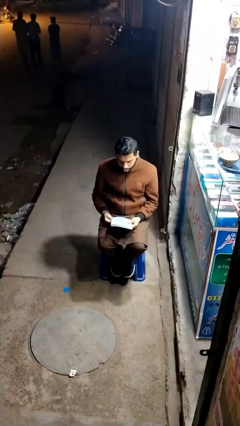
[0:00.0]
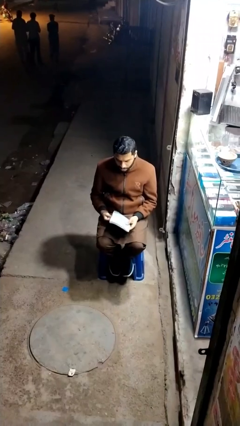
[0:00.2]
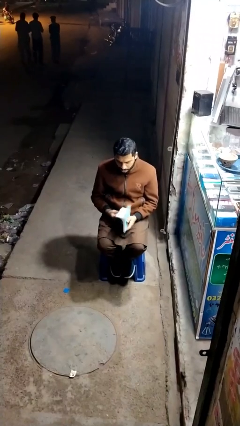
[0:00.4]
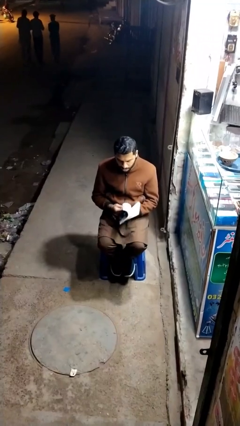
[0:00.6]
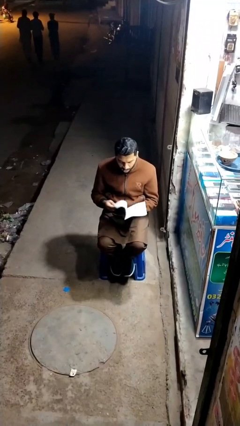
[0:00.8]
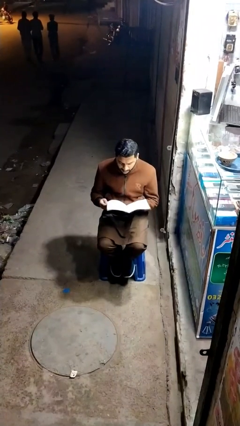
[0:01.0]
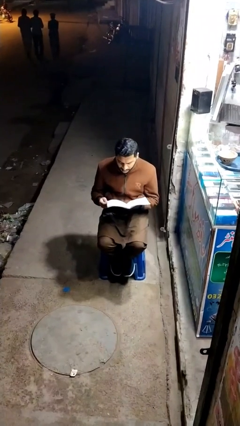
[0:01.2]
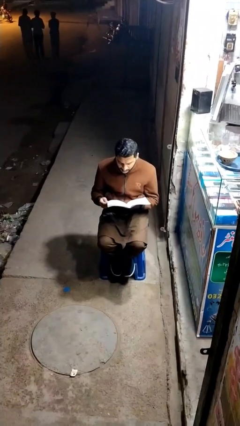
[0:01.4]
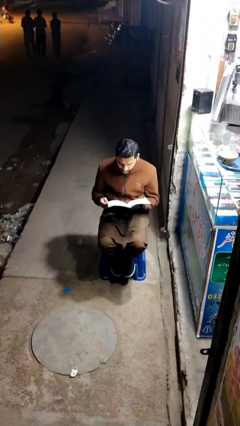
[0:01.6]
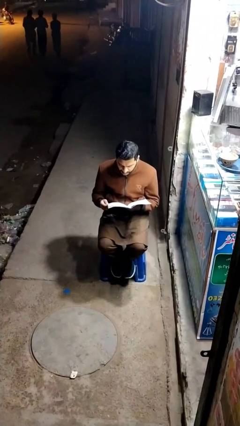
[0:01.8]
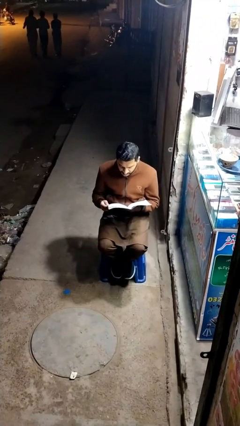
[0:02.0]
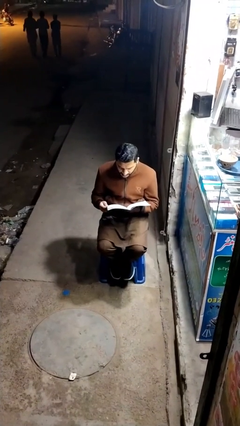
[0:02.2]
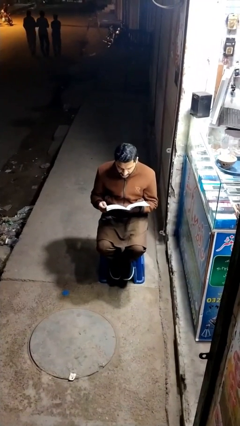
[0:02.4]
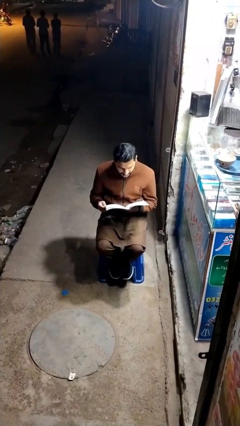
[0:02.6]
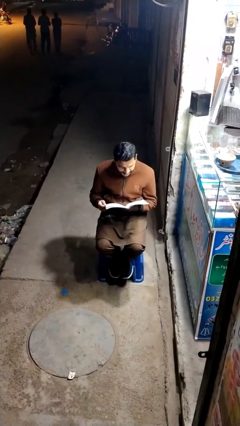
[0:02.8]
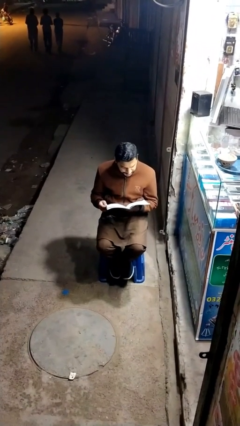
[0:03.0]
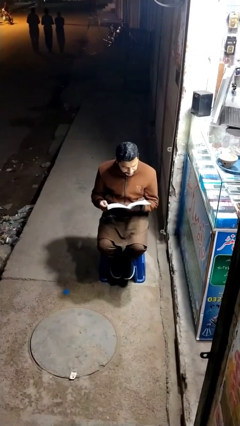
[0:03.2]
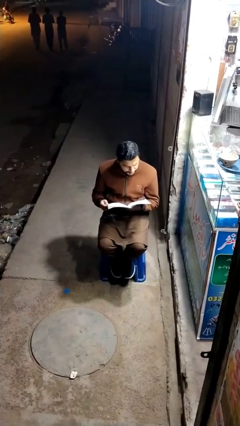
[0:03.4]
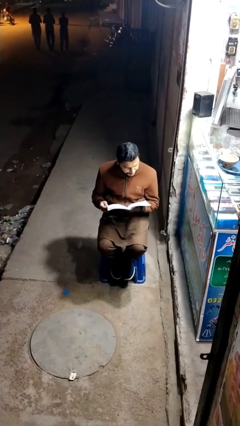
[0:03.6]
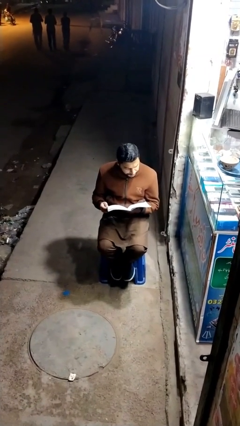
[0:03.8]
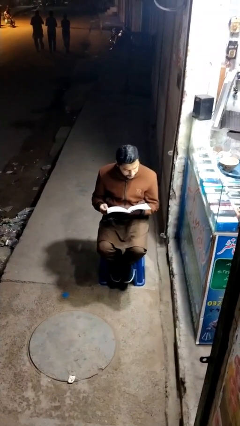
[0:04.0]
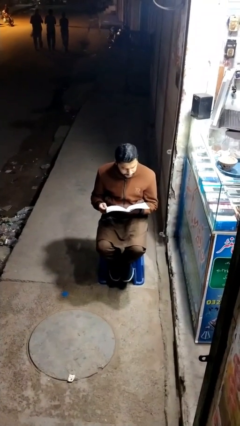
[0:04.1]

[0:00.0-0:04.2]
person interacts with laptop

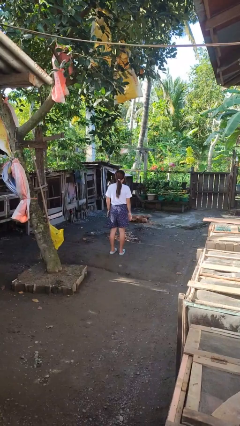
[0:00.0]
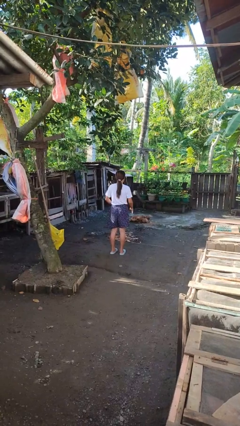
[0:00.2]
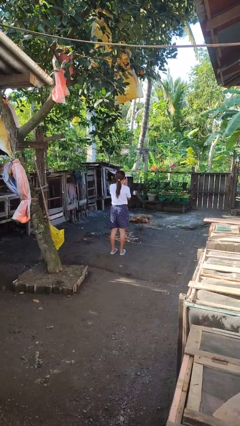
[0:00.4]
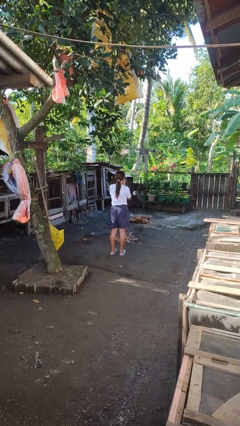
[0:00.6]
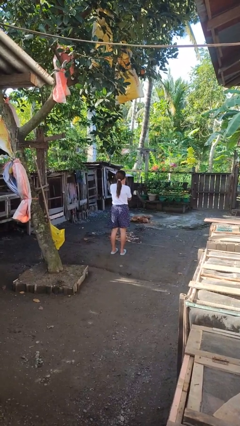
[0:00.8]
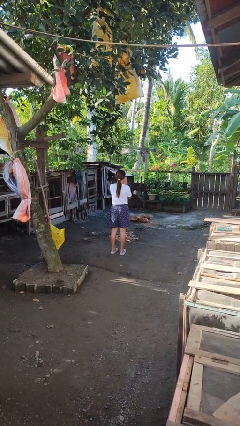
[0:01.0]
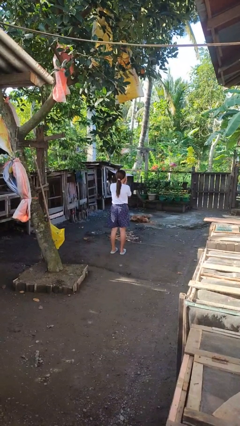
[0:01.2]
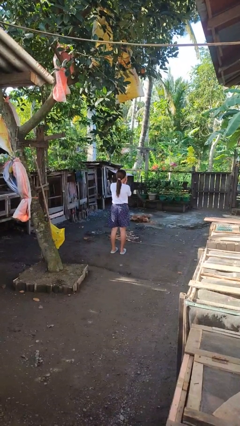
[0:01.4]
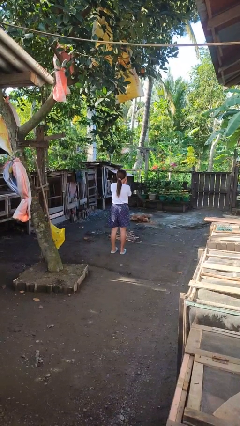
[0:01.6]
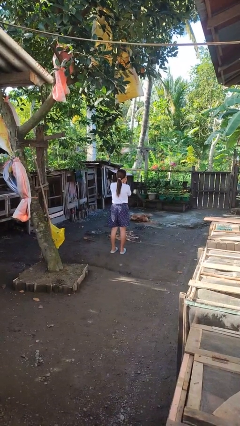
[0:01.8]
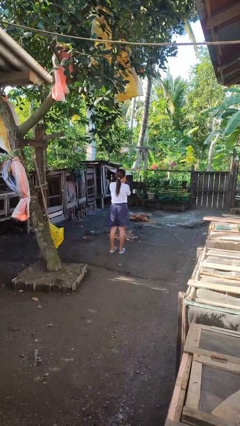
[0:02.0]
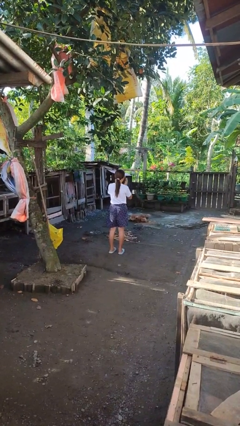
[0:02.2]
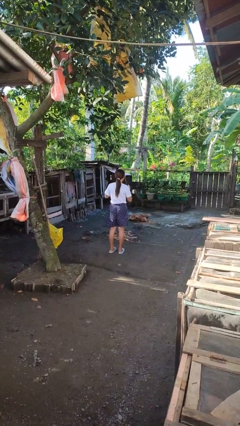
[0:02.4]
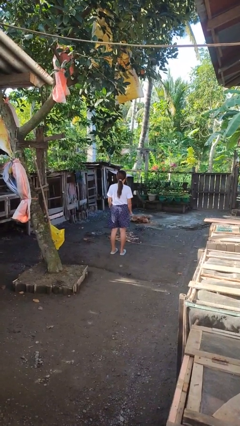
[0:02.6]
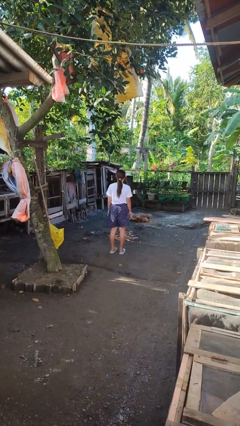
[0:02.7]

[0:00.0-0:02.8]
person blows into hands

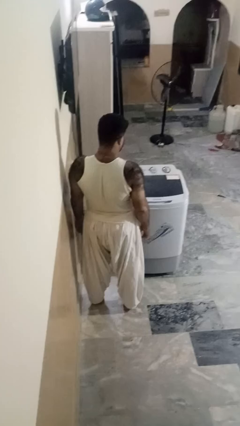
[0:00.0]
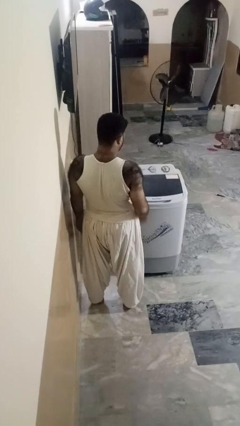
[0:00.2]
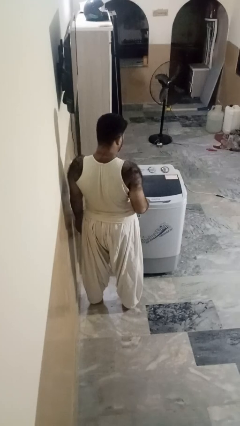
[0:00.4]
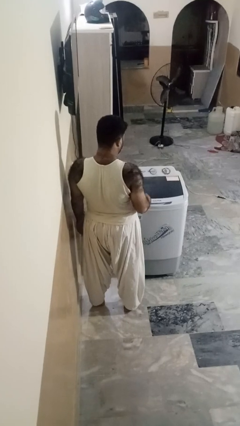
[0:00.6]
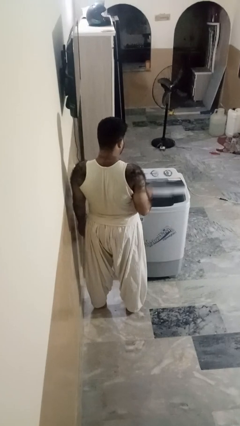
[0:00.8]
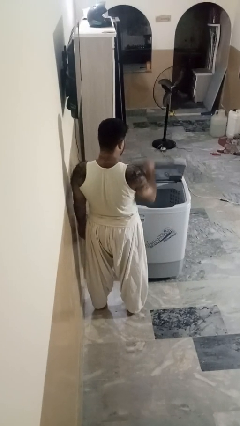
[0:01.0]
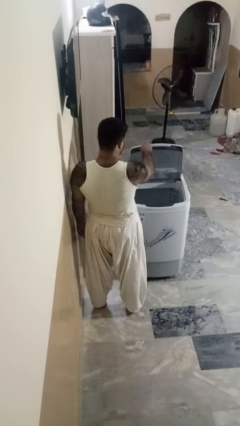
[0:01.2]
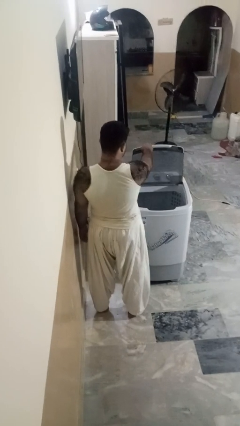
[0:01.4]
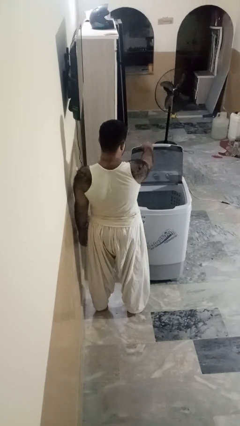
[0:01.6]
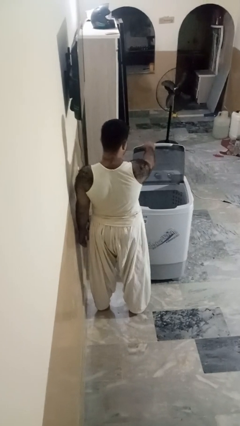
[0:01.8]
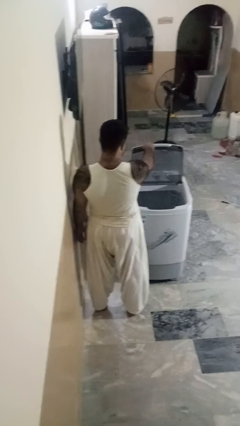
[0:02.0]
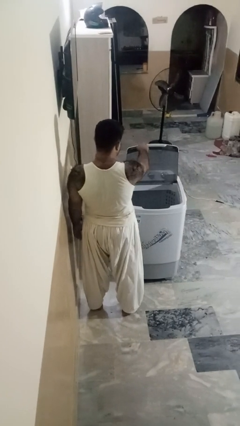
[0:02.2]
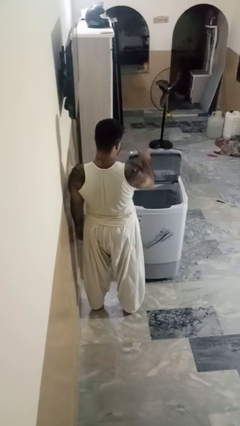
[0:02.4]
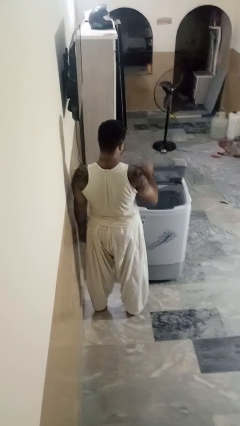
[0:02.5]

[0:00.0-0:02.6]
person opens clothes washer

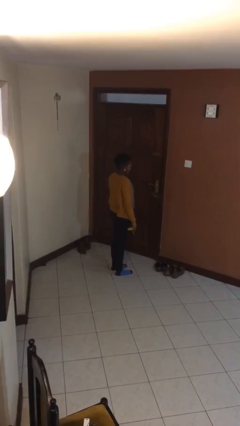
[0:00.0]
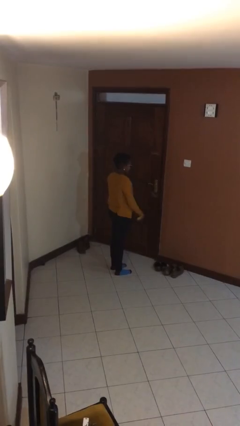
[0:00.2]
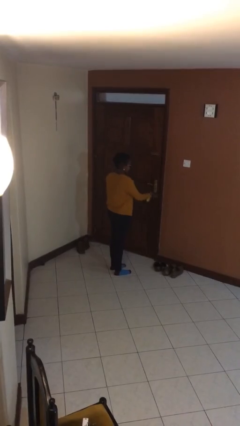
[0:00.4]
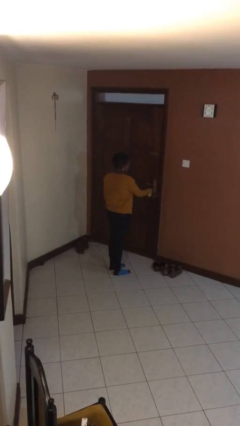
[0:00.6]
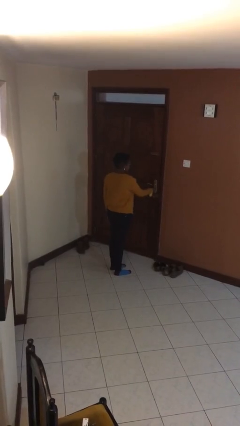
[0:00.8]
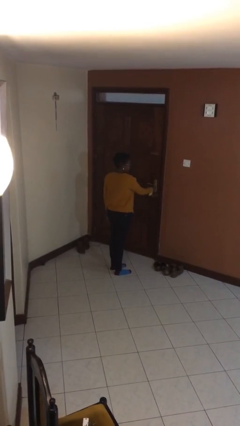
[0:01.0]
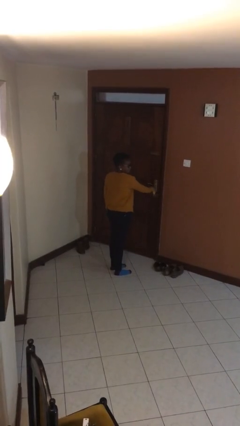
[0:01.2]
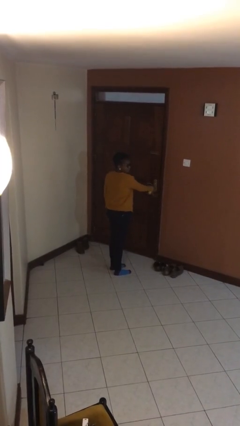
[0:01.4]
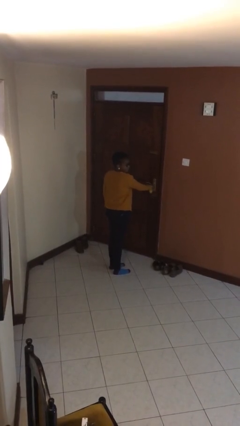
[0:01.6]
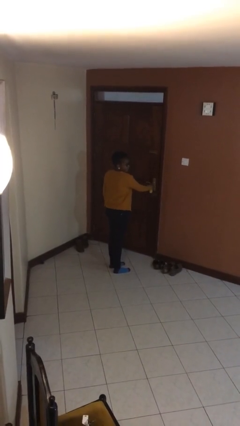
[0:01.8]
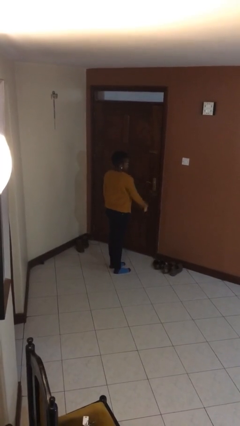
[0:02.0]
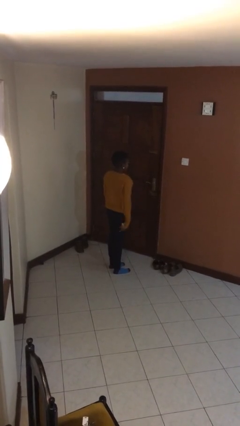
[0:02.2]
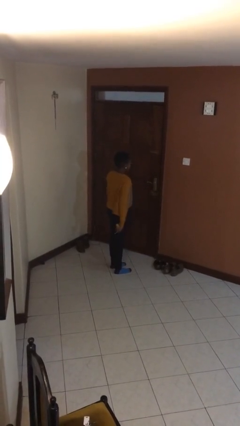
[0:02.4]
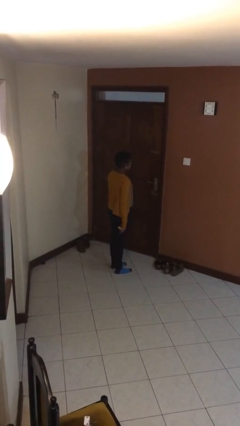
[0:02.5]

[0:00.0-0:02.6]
person unlocks door with keys

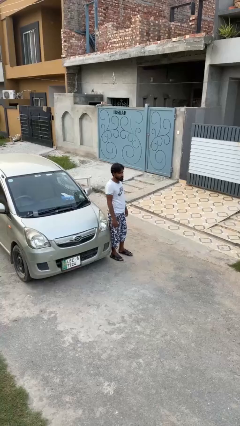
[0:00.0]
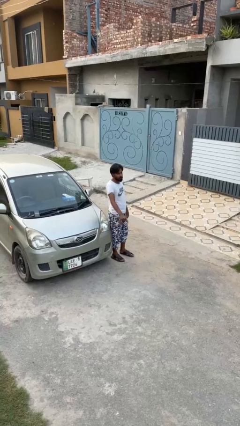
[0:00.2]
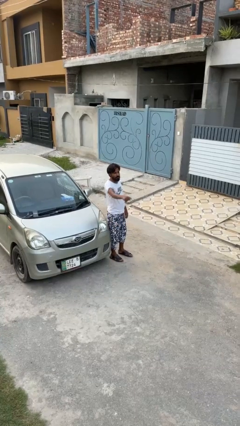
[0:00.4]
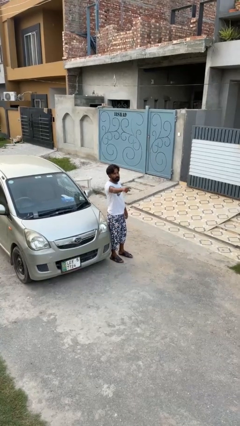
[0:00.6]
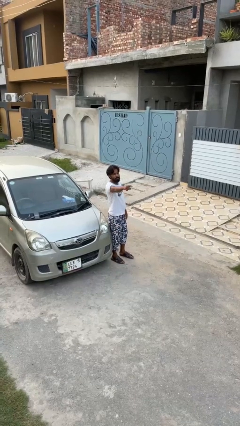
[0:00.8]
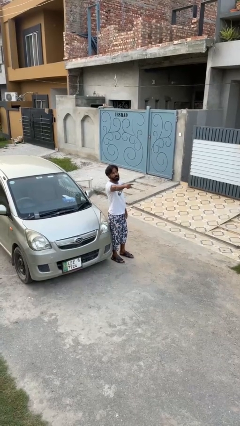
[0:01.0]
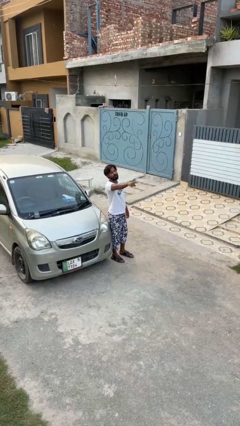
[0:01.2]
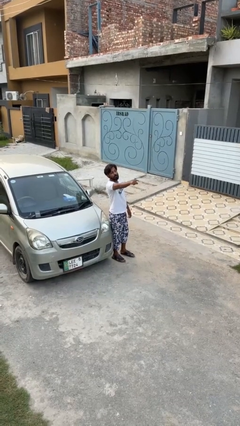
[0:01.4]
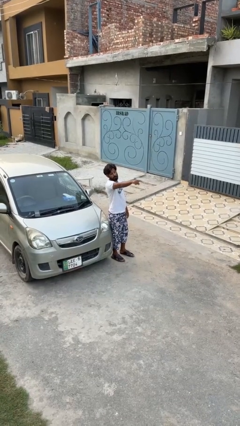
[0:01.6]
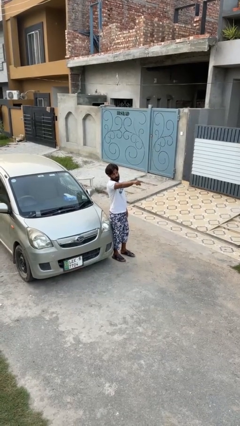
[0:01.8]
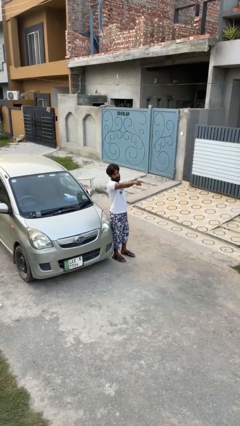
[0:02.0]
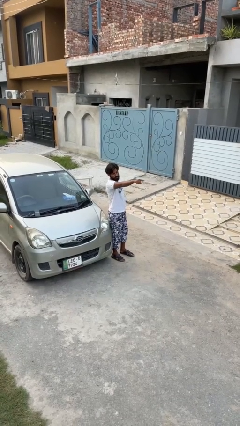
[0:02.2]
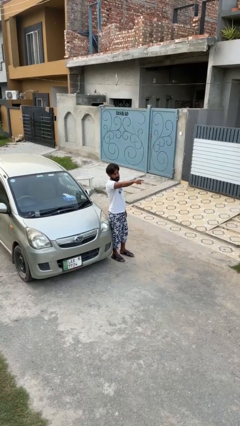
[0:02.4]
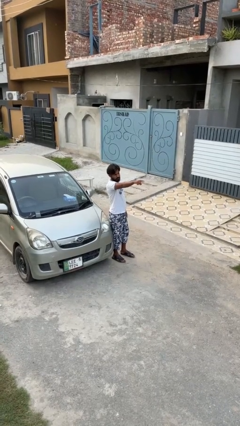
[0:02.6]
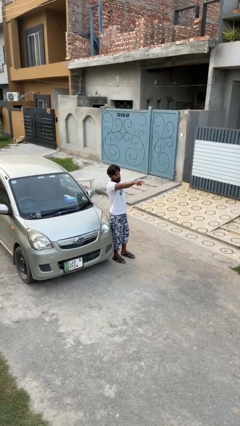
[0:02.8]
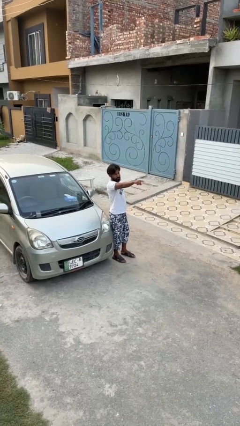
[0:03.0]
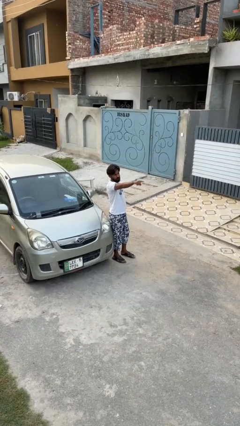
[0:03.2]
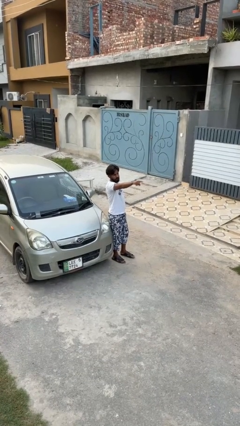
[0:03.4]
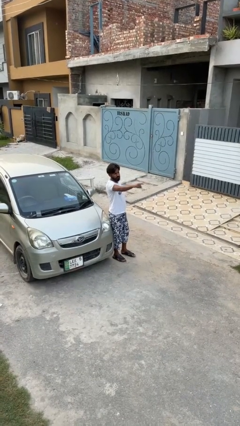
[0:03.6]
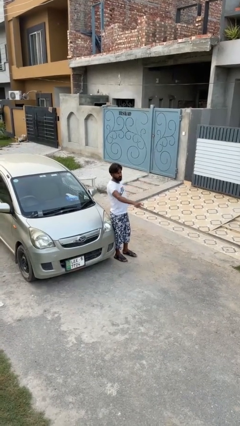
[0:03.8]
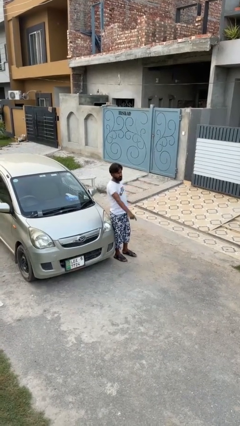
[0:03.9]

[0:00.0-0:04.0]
person points at person

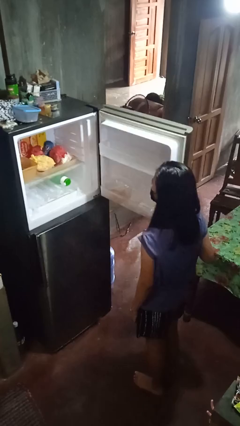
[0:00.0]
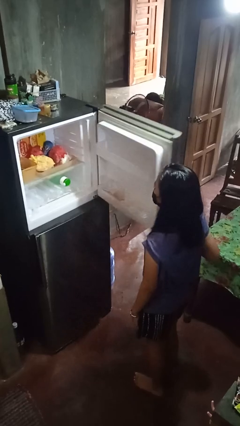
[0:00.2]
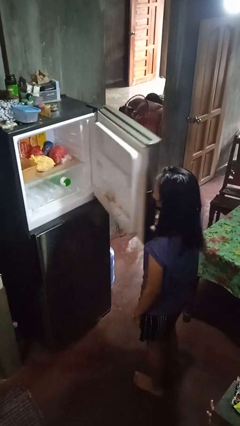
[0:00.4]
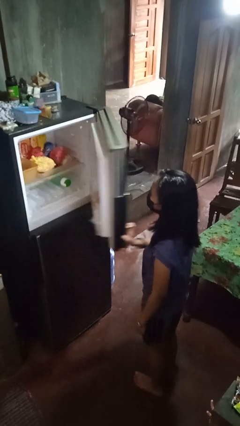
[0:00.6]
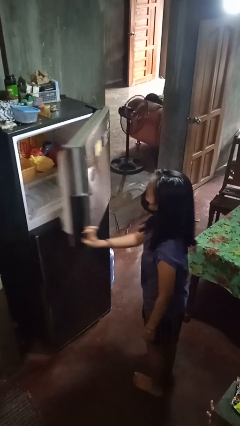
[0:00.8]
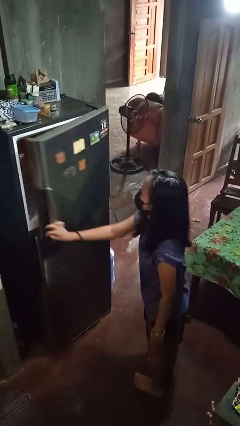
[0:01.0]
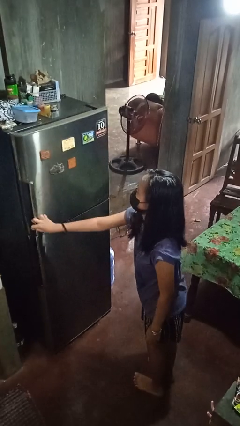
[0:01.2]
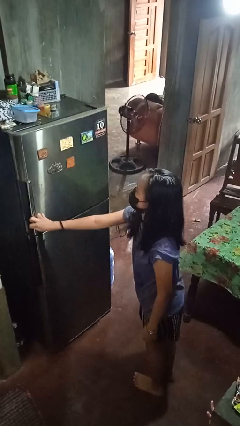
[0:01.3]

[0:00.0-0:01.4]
person closes refrigerator
